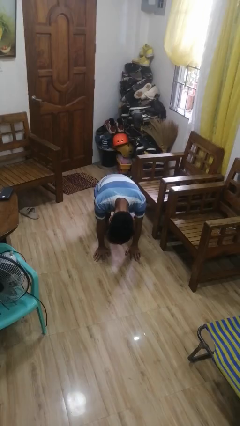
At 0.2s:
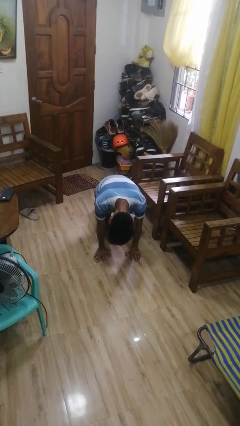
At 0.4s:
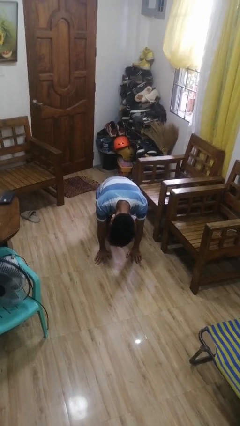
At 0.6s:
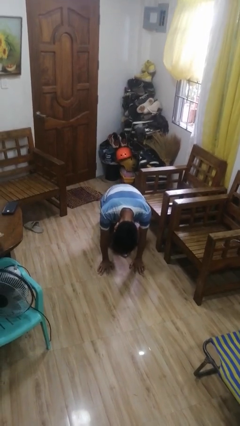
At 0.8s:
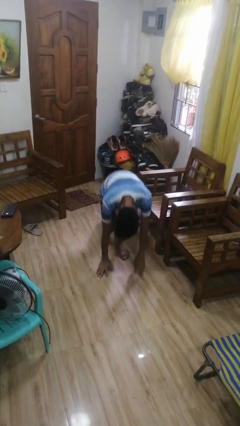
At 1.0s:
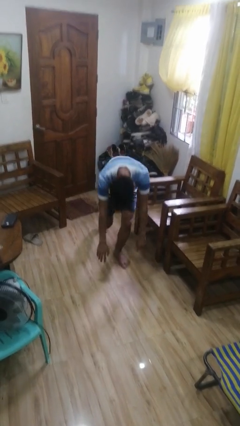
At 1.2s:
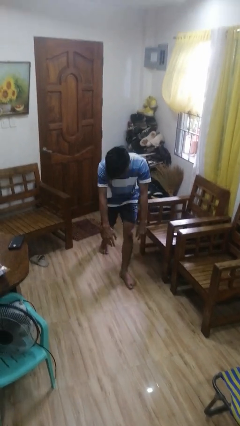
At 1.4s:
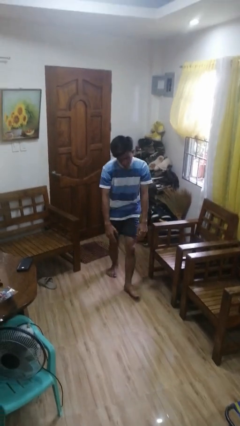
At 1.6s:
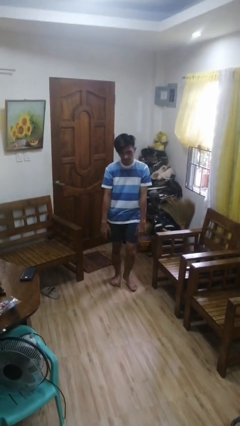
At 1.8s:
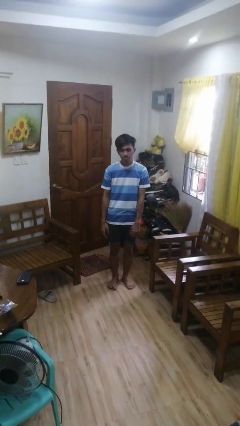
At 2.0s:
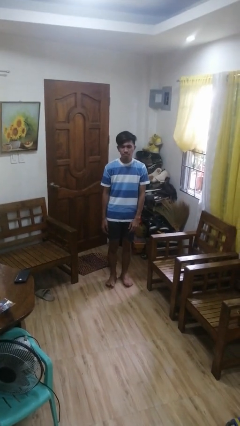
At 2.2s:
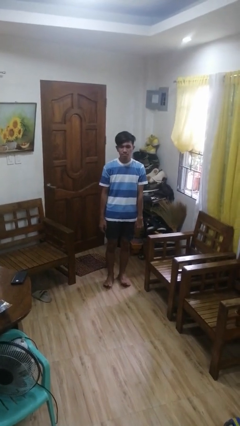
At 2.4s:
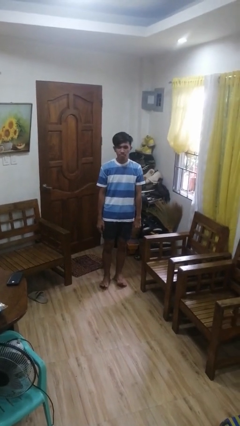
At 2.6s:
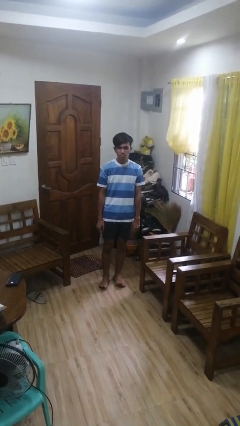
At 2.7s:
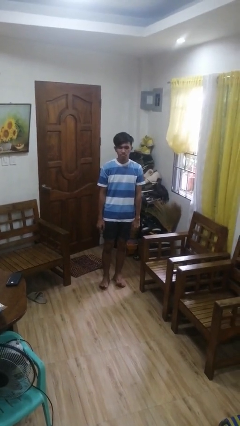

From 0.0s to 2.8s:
person stands up from floor

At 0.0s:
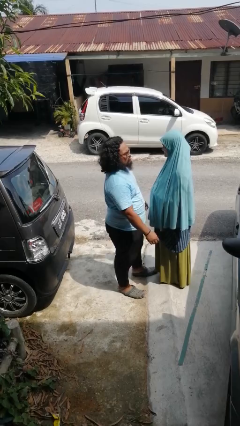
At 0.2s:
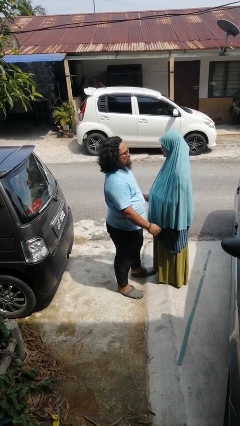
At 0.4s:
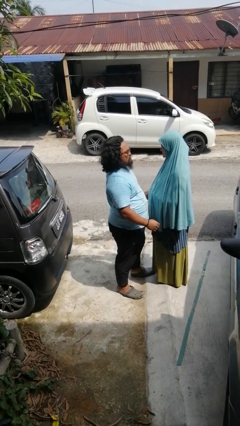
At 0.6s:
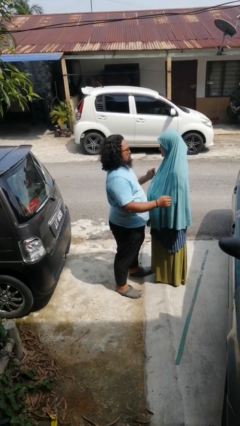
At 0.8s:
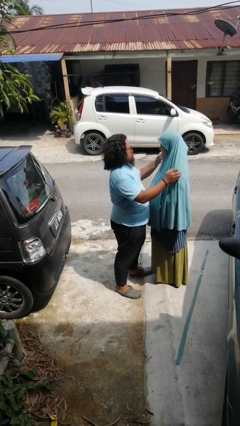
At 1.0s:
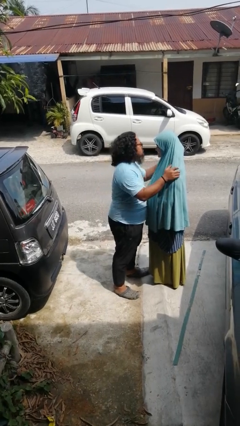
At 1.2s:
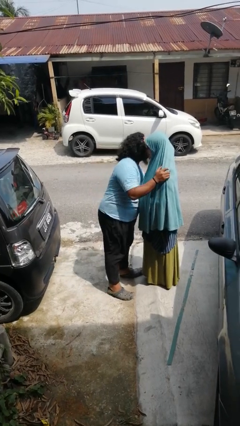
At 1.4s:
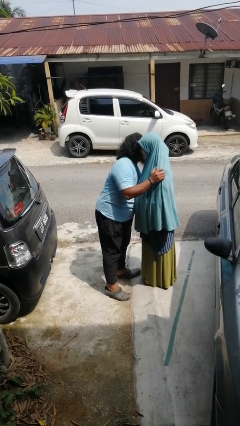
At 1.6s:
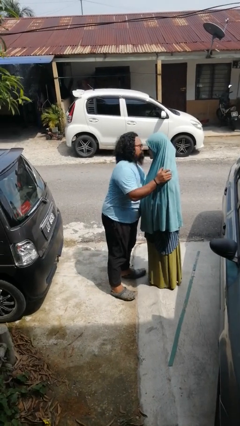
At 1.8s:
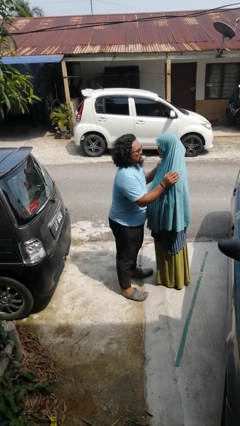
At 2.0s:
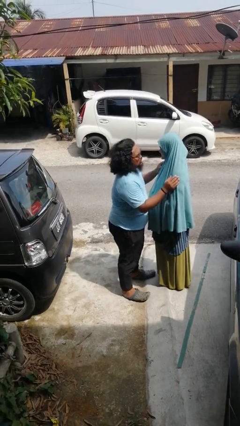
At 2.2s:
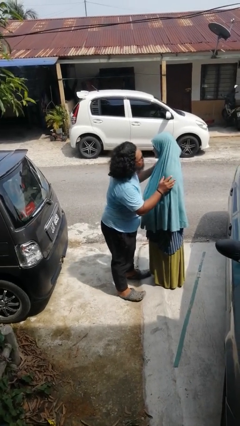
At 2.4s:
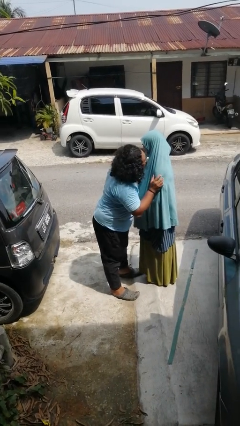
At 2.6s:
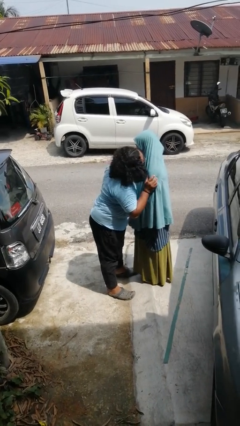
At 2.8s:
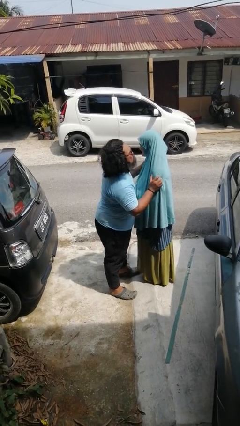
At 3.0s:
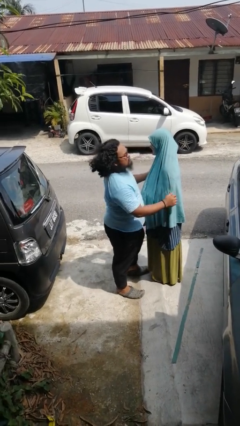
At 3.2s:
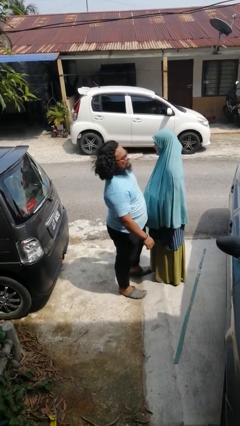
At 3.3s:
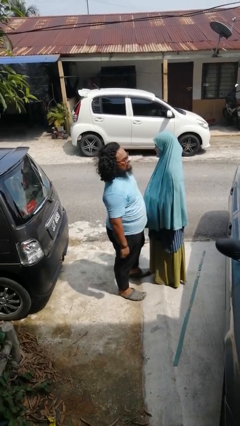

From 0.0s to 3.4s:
person kisses cheek of person

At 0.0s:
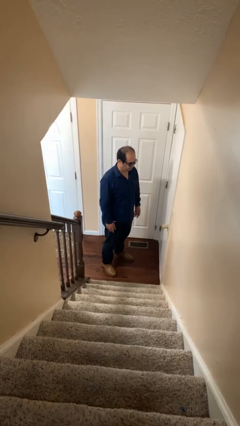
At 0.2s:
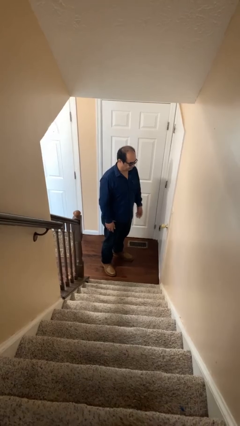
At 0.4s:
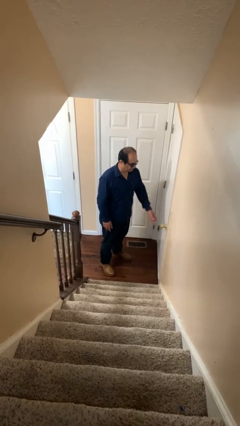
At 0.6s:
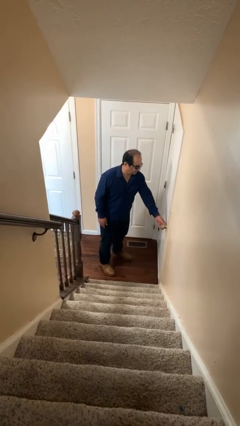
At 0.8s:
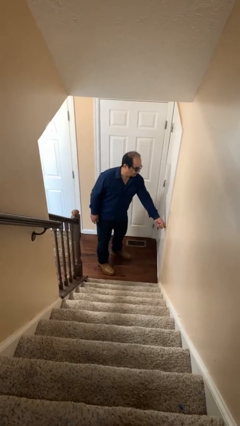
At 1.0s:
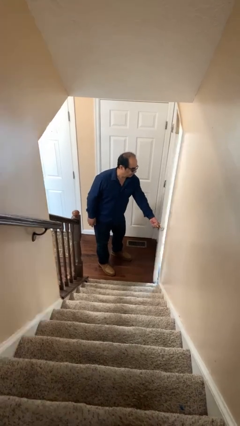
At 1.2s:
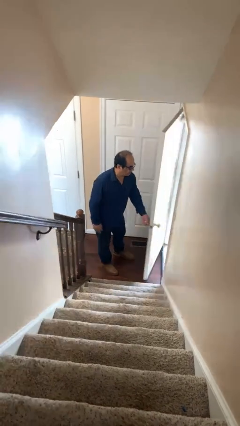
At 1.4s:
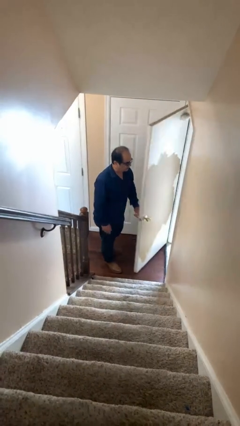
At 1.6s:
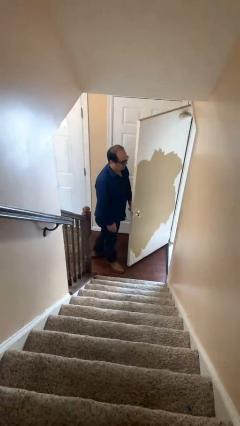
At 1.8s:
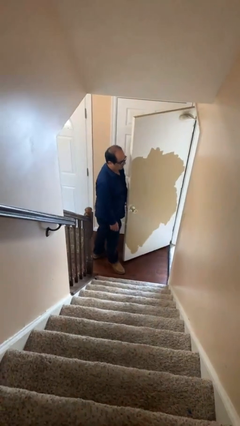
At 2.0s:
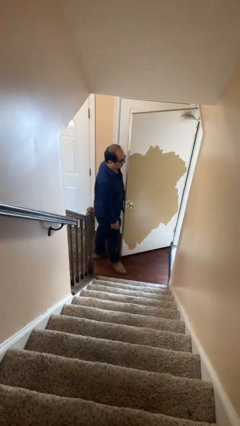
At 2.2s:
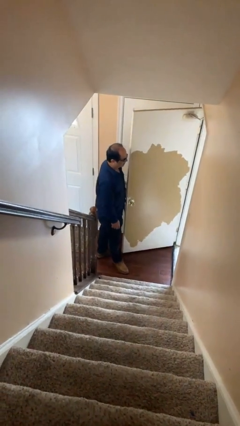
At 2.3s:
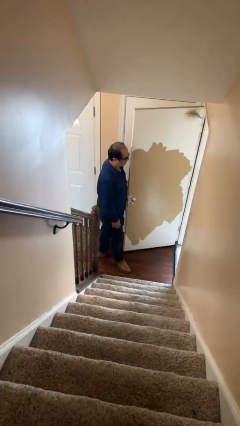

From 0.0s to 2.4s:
person opens facility door

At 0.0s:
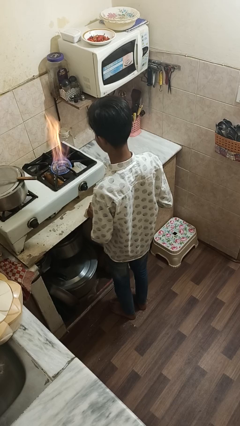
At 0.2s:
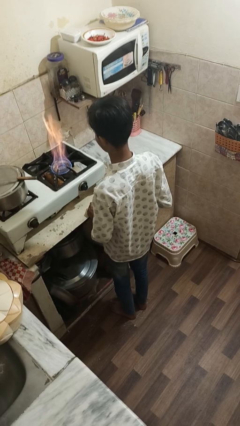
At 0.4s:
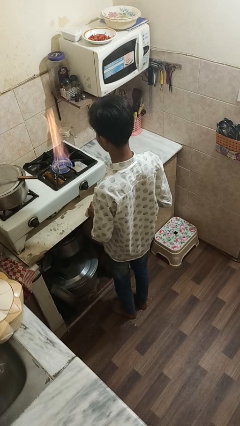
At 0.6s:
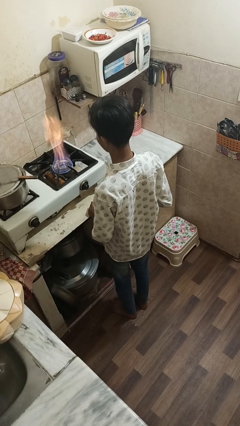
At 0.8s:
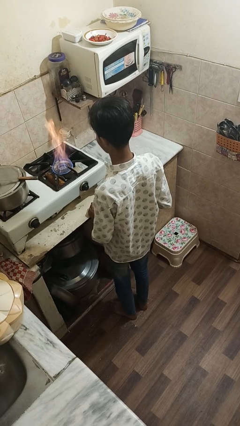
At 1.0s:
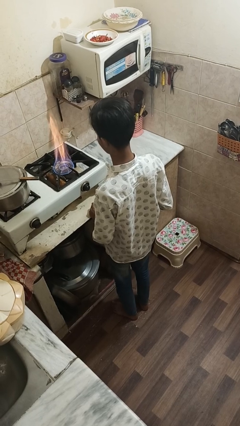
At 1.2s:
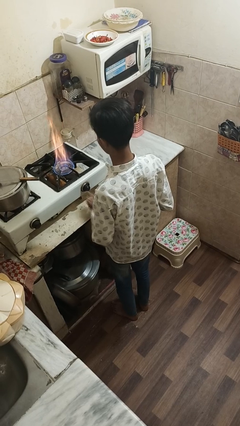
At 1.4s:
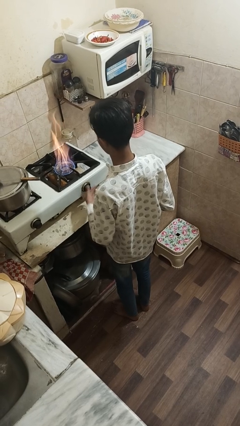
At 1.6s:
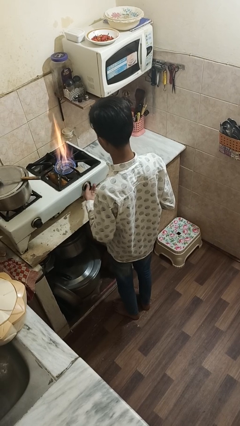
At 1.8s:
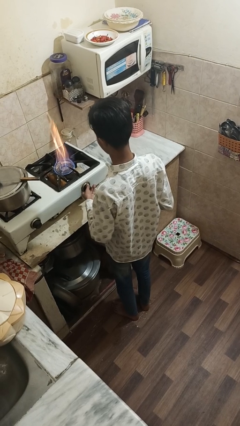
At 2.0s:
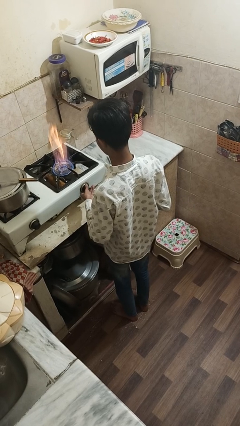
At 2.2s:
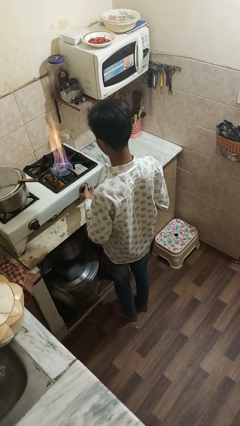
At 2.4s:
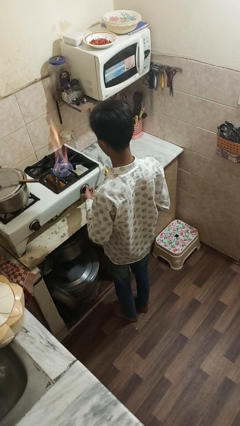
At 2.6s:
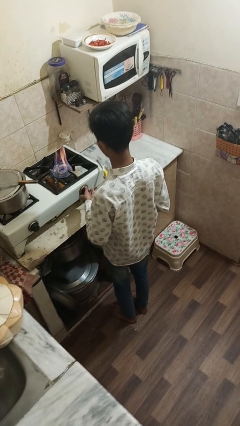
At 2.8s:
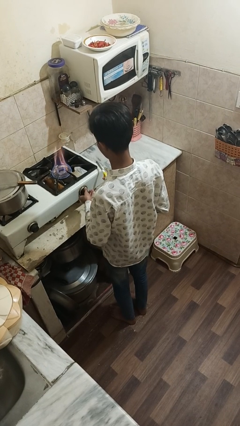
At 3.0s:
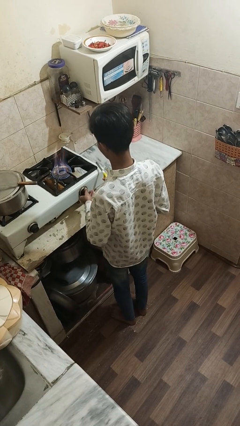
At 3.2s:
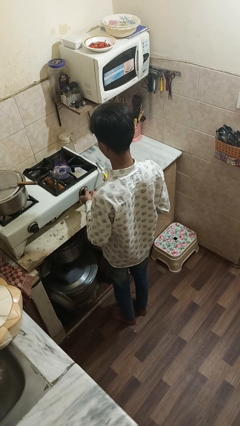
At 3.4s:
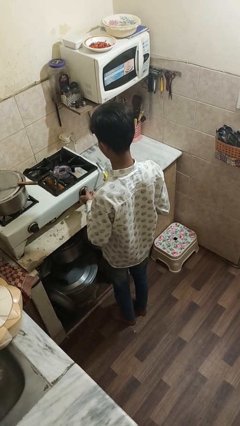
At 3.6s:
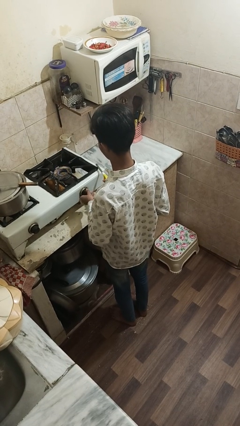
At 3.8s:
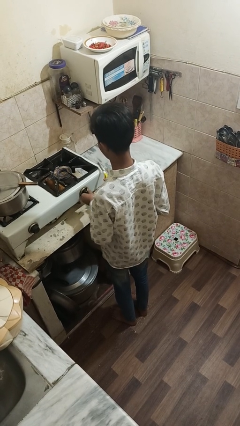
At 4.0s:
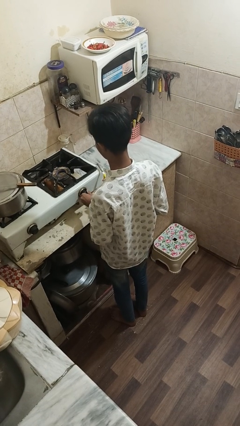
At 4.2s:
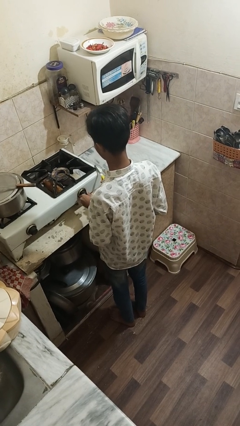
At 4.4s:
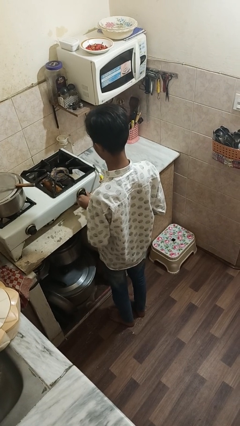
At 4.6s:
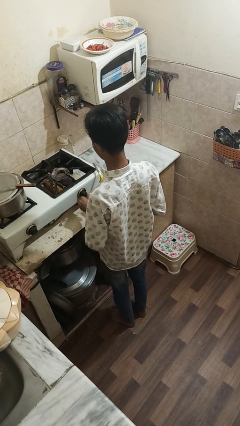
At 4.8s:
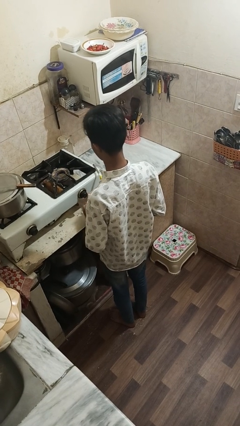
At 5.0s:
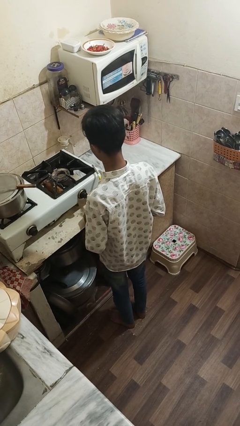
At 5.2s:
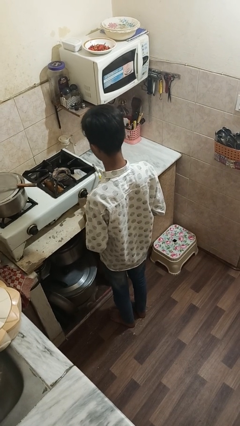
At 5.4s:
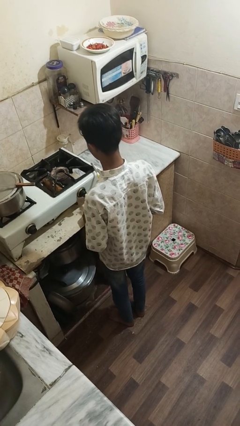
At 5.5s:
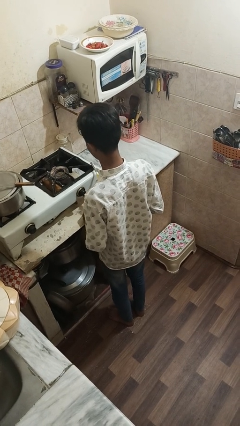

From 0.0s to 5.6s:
person turns off stovetop

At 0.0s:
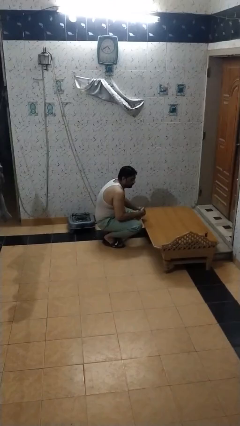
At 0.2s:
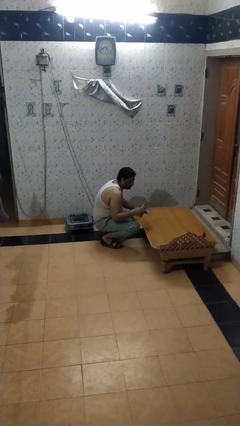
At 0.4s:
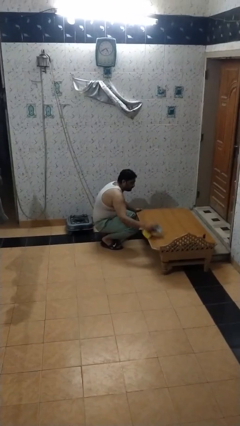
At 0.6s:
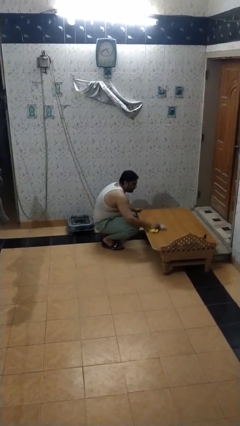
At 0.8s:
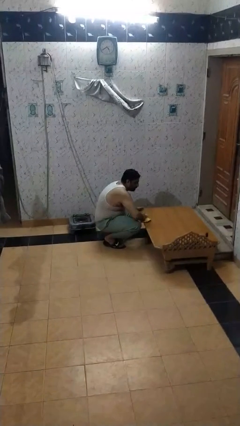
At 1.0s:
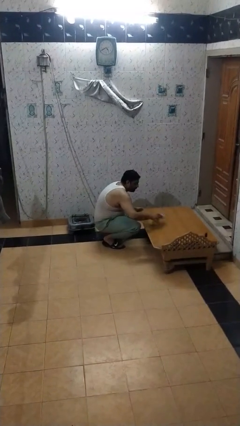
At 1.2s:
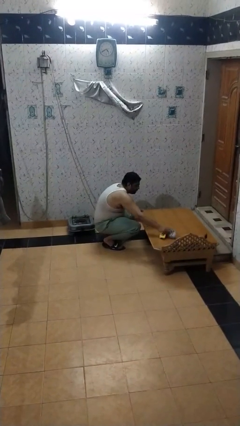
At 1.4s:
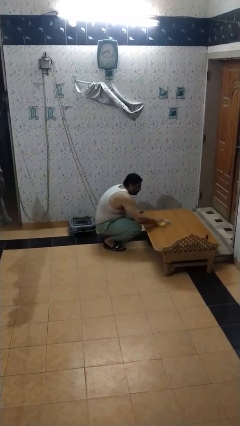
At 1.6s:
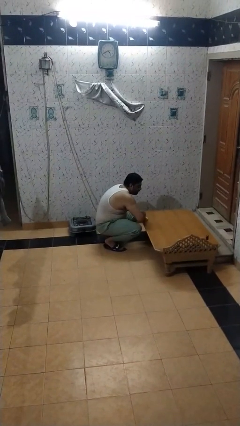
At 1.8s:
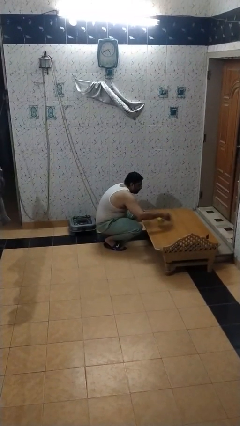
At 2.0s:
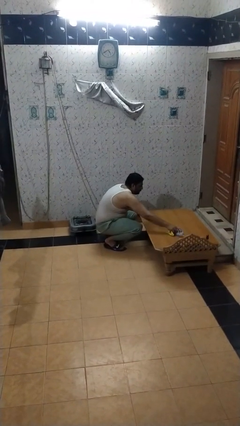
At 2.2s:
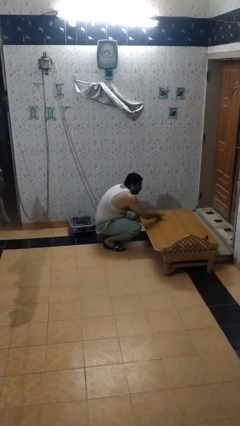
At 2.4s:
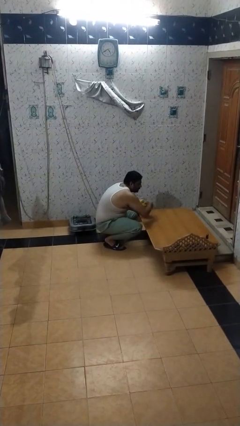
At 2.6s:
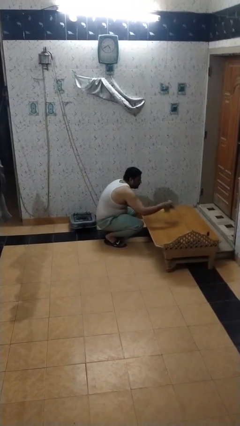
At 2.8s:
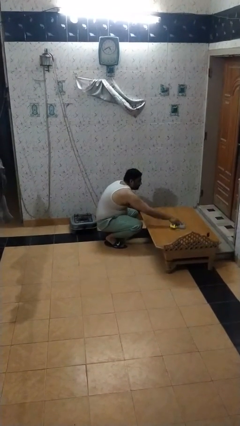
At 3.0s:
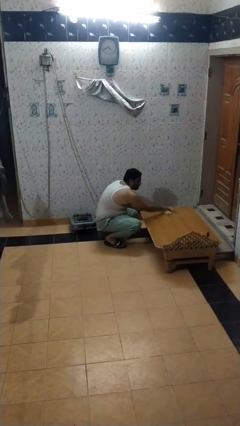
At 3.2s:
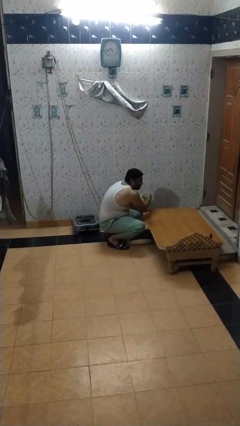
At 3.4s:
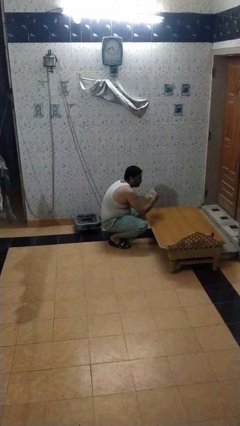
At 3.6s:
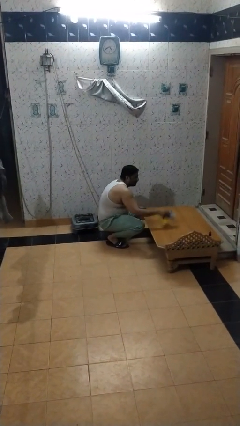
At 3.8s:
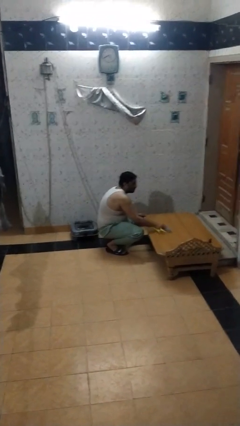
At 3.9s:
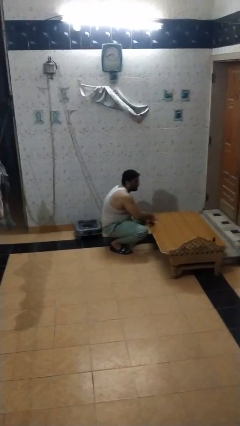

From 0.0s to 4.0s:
person cleans table with rag
